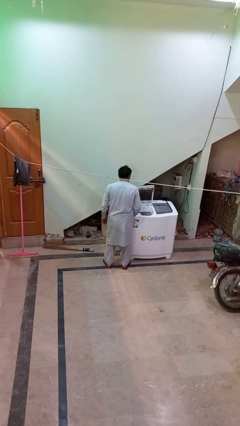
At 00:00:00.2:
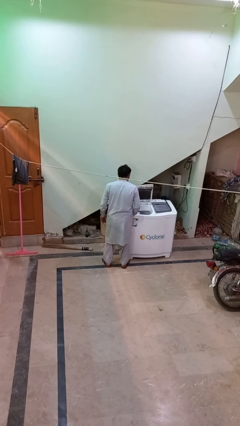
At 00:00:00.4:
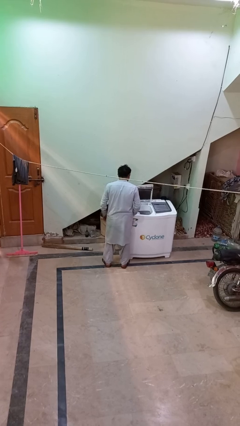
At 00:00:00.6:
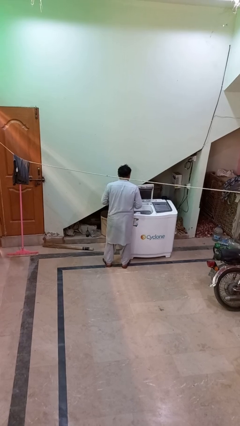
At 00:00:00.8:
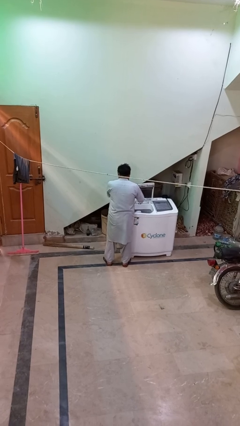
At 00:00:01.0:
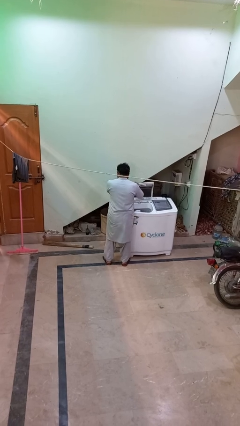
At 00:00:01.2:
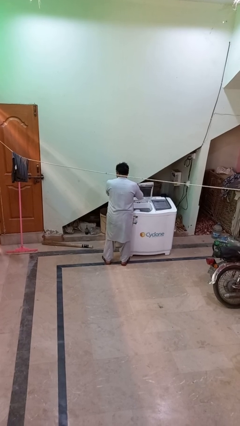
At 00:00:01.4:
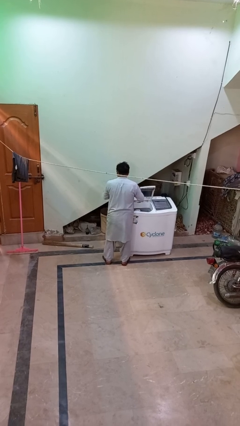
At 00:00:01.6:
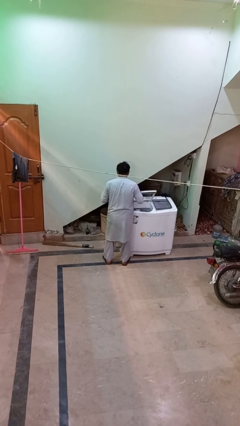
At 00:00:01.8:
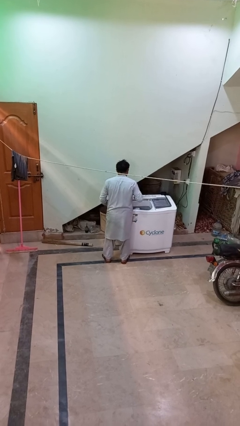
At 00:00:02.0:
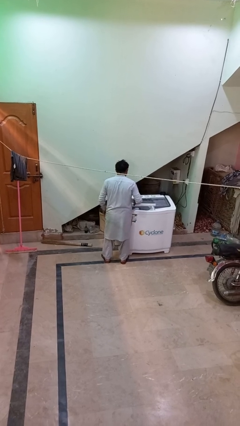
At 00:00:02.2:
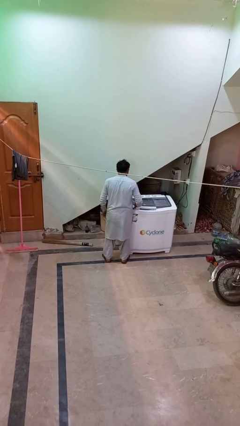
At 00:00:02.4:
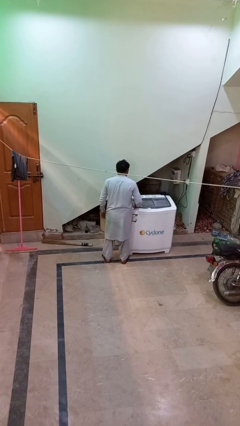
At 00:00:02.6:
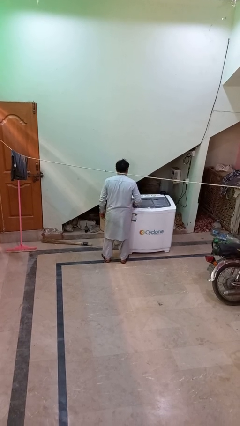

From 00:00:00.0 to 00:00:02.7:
person closes clothes washer

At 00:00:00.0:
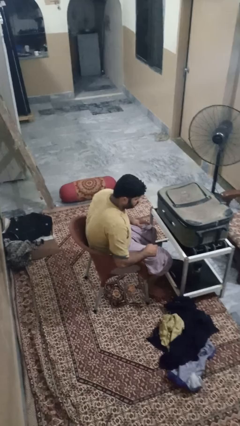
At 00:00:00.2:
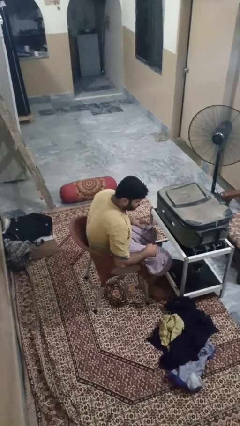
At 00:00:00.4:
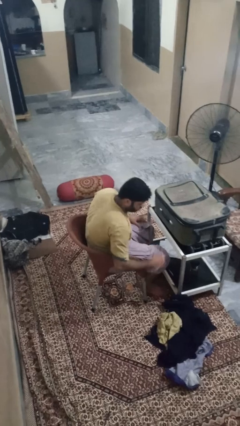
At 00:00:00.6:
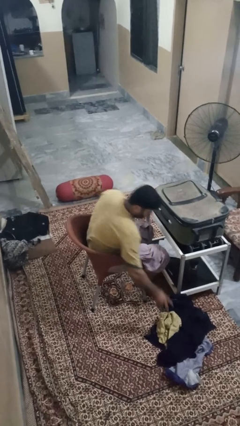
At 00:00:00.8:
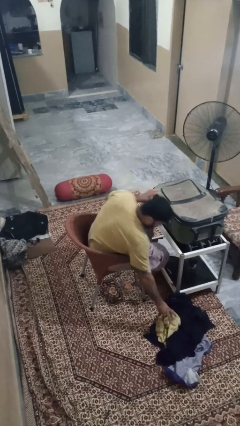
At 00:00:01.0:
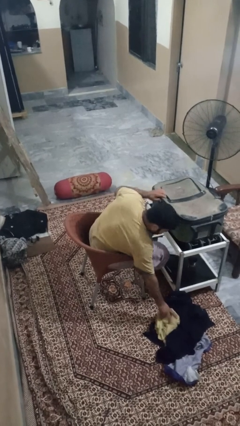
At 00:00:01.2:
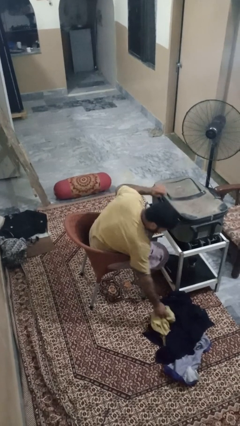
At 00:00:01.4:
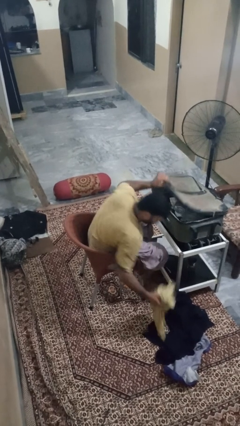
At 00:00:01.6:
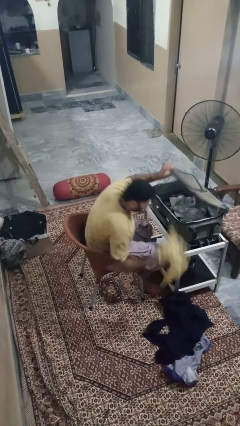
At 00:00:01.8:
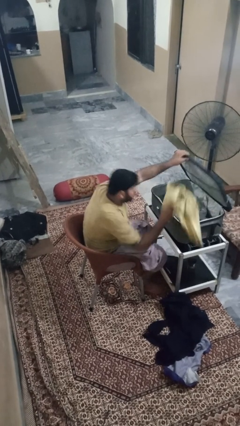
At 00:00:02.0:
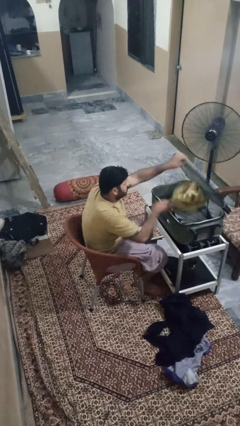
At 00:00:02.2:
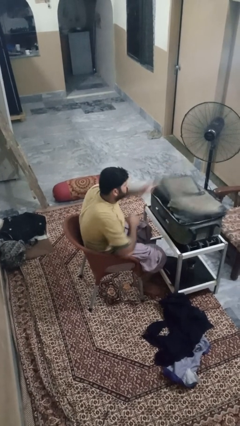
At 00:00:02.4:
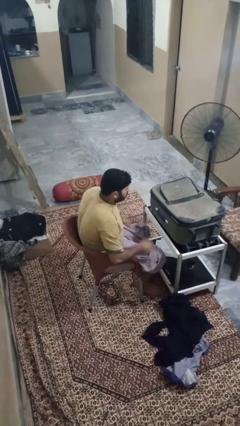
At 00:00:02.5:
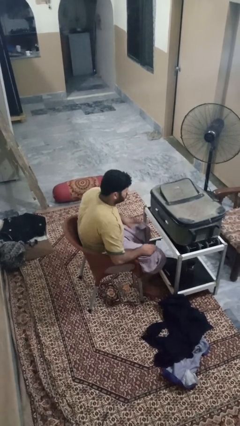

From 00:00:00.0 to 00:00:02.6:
person loads clothes into suitcase

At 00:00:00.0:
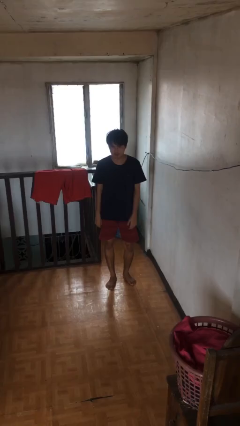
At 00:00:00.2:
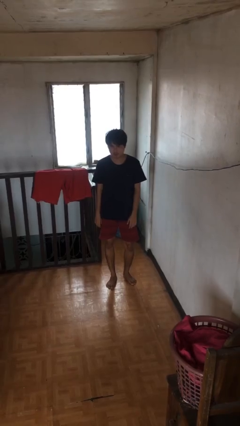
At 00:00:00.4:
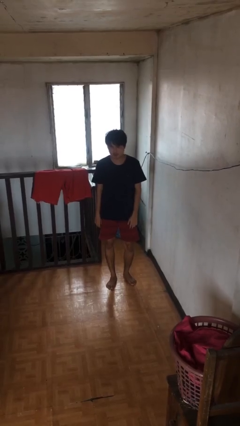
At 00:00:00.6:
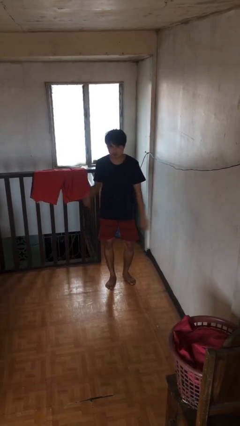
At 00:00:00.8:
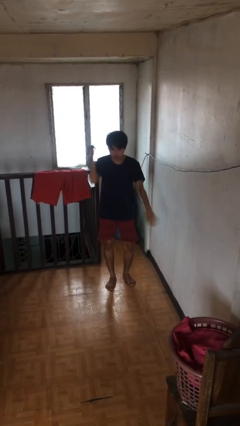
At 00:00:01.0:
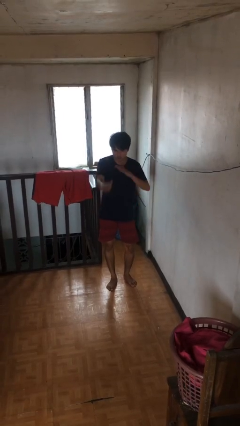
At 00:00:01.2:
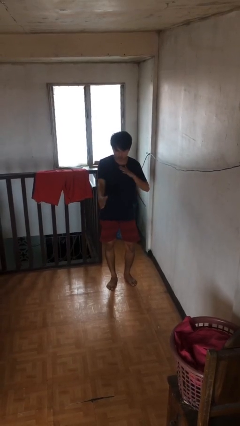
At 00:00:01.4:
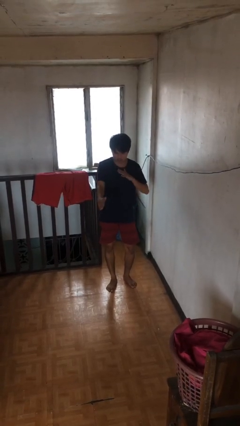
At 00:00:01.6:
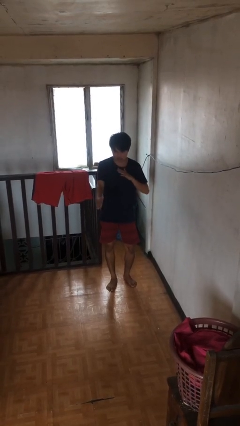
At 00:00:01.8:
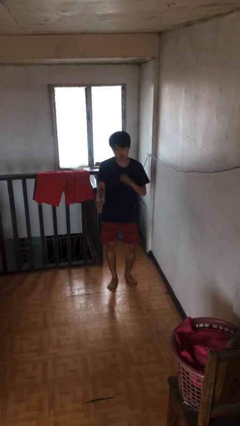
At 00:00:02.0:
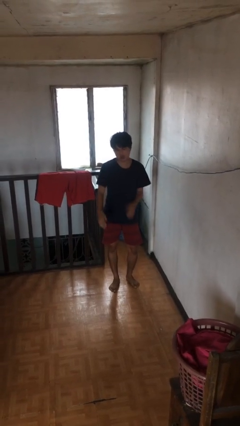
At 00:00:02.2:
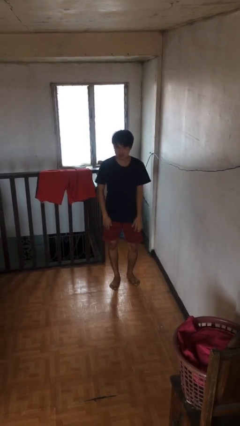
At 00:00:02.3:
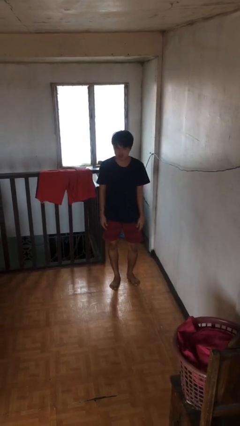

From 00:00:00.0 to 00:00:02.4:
person karate chop

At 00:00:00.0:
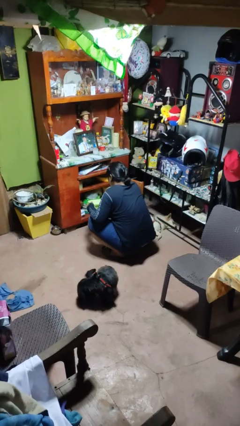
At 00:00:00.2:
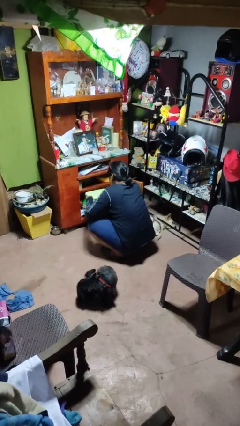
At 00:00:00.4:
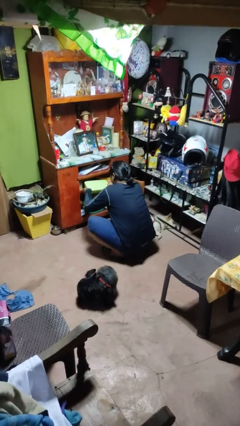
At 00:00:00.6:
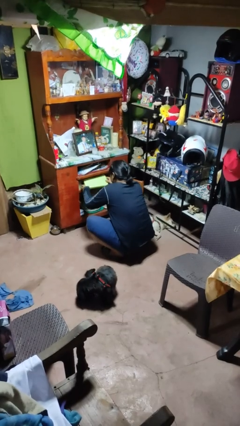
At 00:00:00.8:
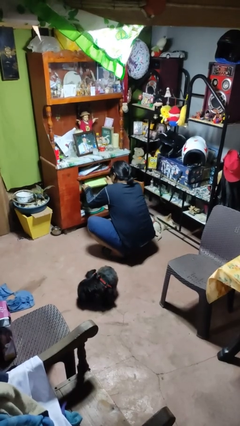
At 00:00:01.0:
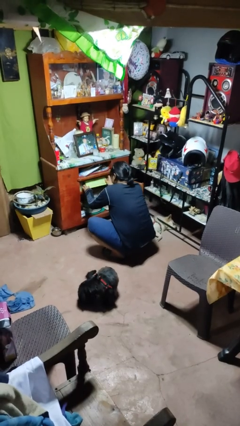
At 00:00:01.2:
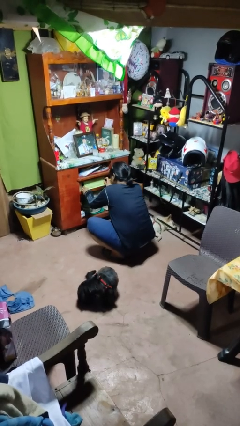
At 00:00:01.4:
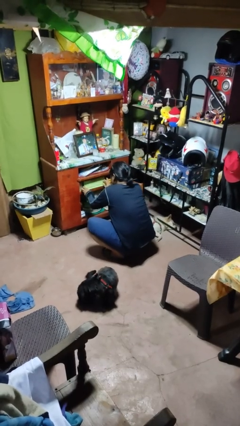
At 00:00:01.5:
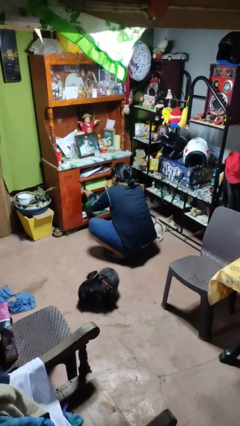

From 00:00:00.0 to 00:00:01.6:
person puts down object into cabinet

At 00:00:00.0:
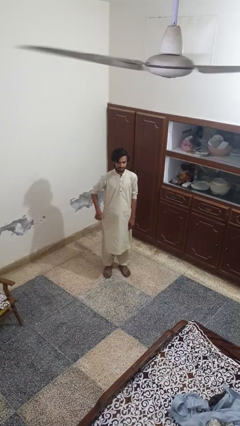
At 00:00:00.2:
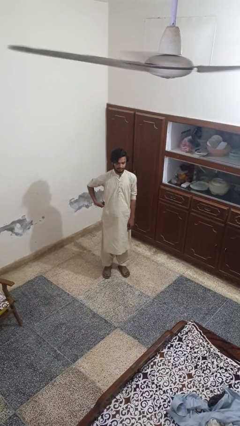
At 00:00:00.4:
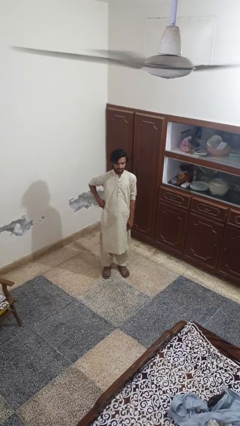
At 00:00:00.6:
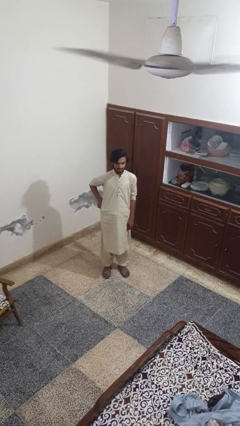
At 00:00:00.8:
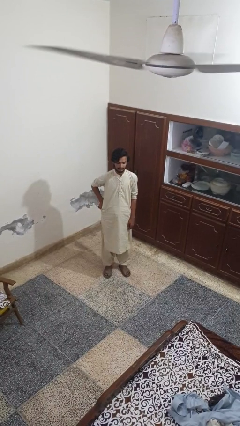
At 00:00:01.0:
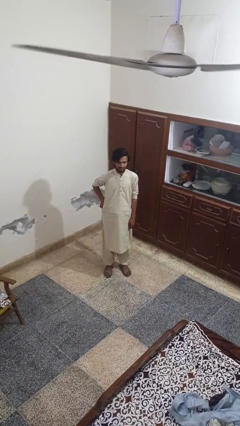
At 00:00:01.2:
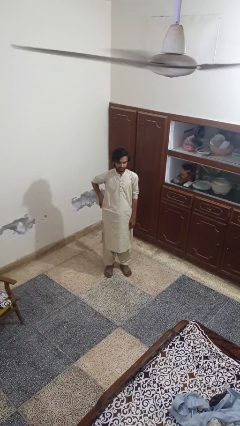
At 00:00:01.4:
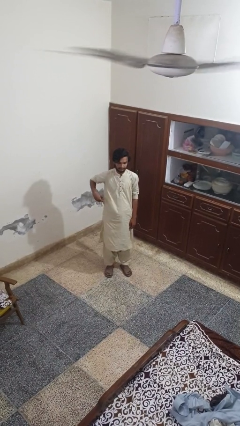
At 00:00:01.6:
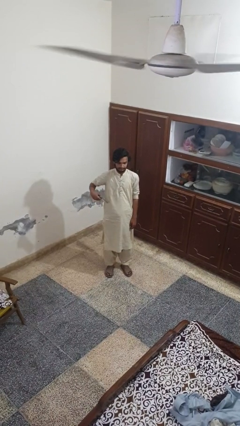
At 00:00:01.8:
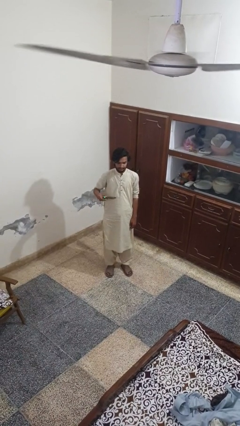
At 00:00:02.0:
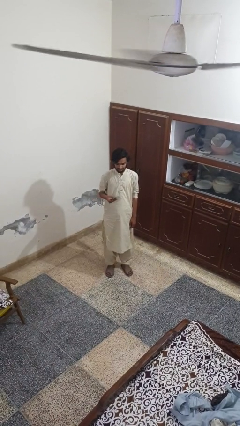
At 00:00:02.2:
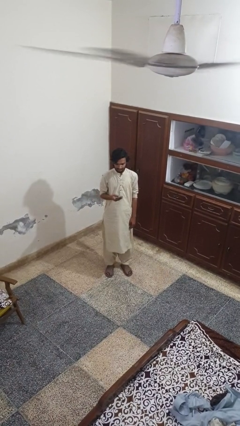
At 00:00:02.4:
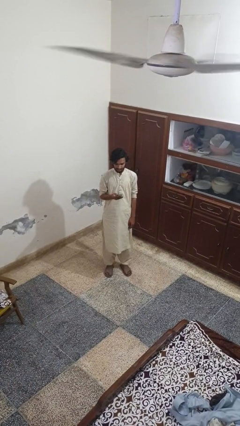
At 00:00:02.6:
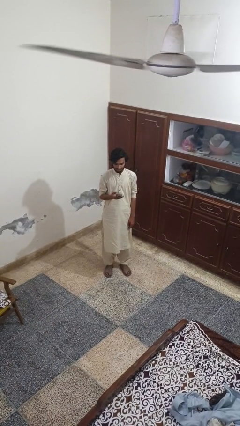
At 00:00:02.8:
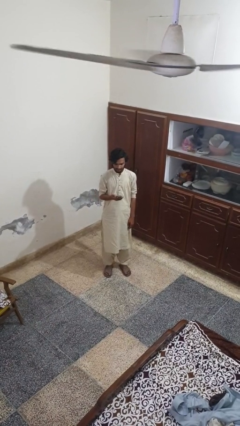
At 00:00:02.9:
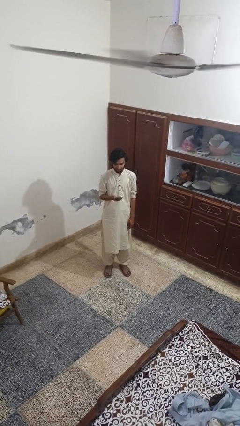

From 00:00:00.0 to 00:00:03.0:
person takes phone from pocket

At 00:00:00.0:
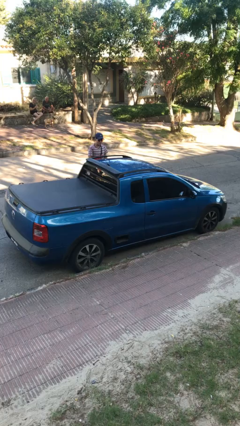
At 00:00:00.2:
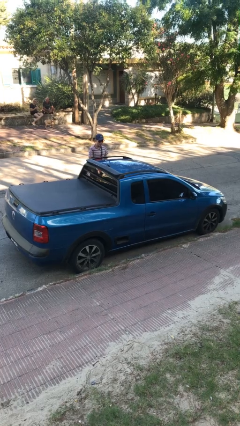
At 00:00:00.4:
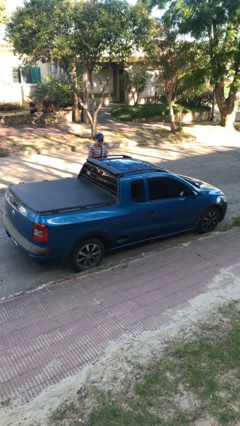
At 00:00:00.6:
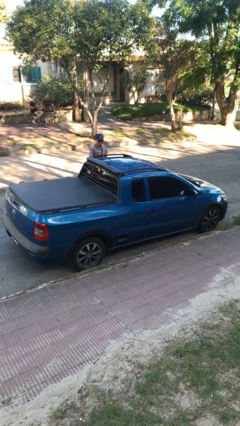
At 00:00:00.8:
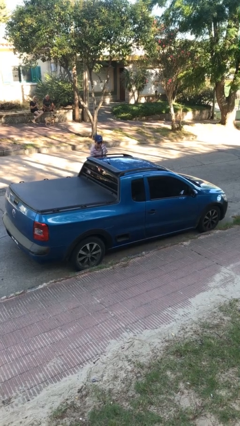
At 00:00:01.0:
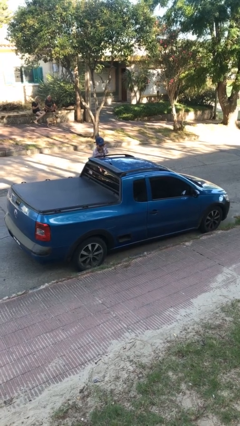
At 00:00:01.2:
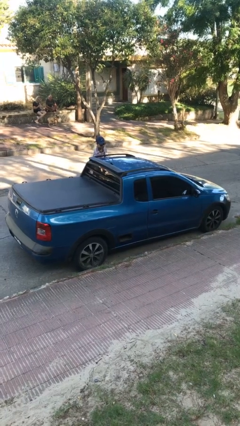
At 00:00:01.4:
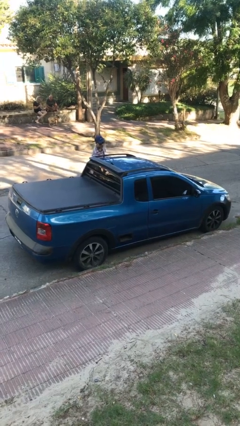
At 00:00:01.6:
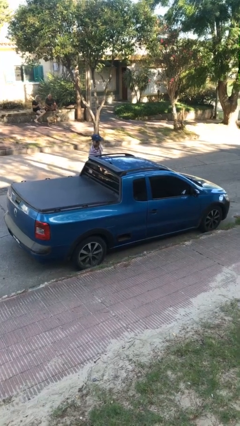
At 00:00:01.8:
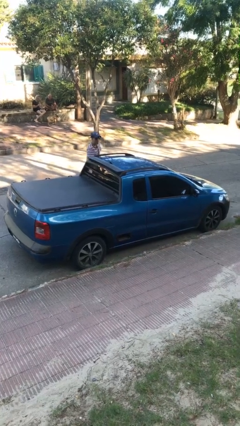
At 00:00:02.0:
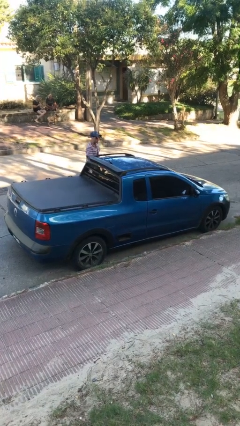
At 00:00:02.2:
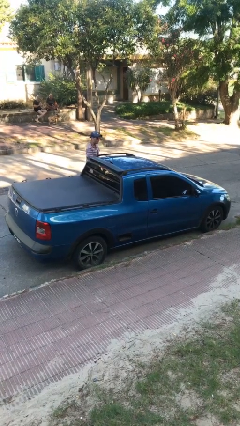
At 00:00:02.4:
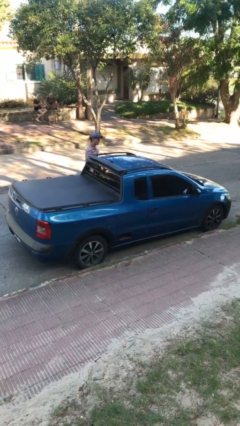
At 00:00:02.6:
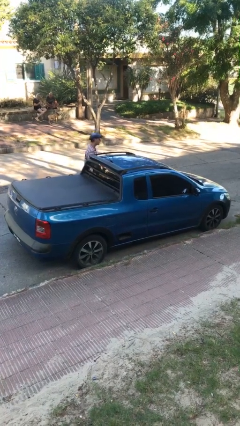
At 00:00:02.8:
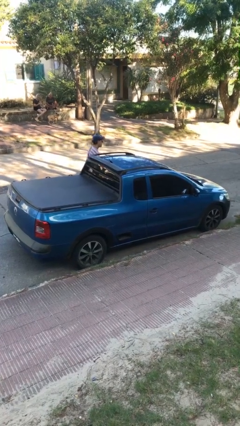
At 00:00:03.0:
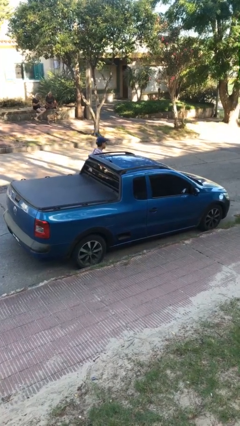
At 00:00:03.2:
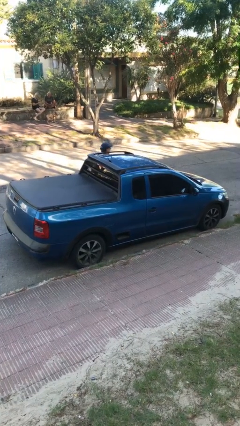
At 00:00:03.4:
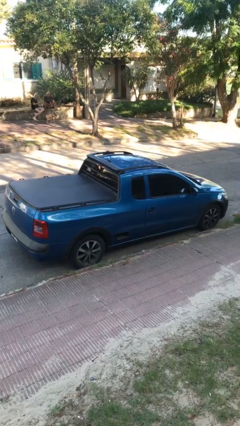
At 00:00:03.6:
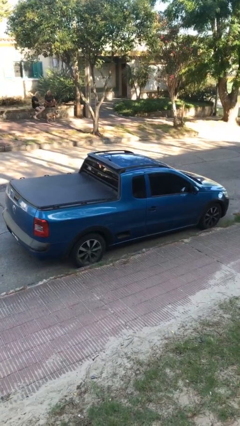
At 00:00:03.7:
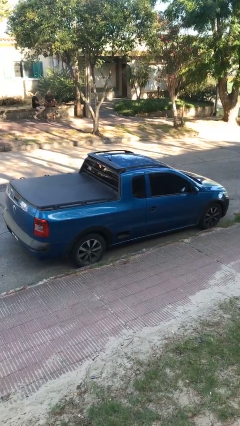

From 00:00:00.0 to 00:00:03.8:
car picks up person

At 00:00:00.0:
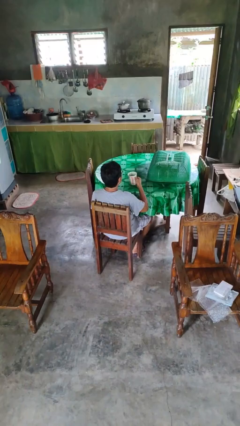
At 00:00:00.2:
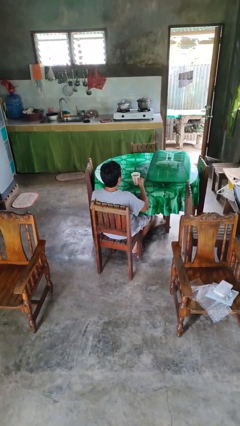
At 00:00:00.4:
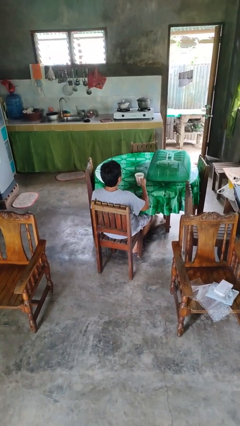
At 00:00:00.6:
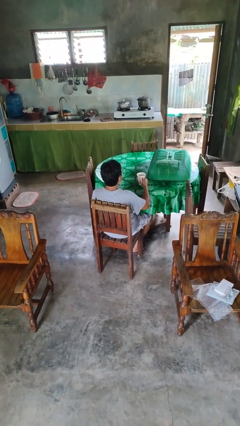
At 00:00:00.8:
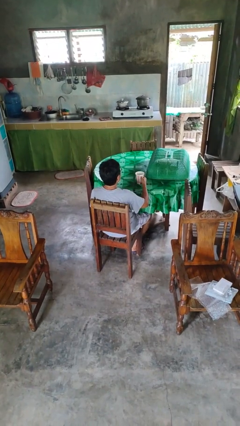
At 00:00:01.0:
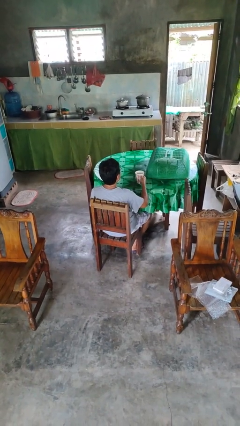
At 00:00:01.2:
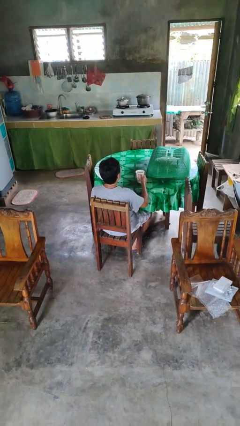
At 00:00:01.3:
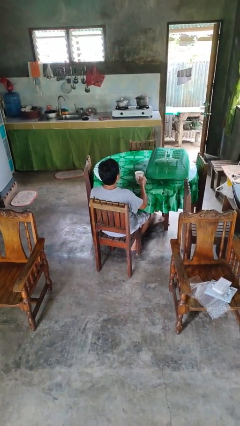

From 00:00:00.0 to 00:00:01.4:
person puts down object on table
